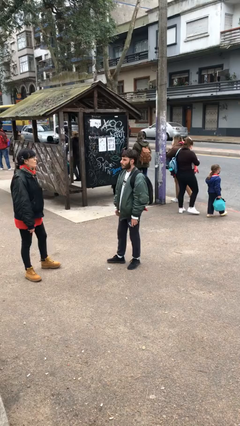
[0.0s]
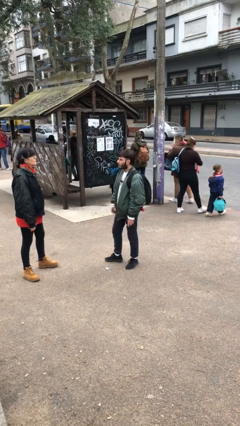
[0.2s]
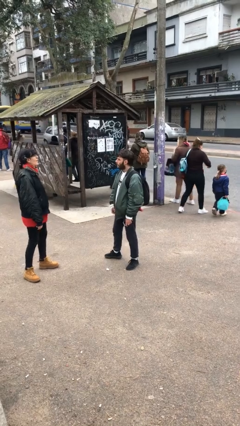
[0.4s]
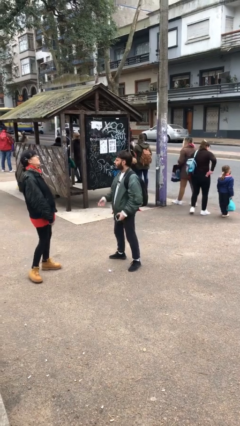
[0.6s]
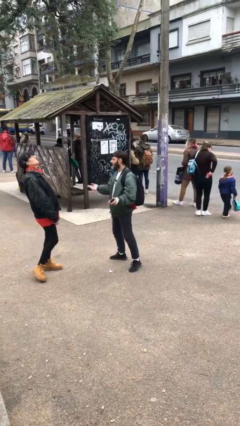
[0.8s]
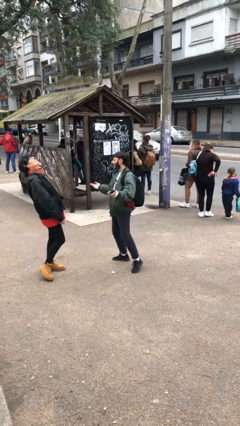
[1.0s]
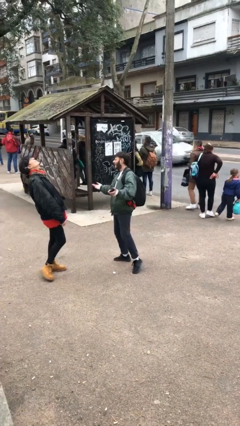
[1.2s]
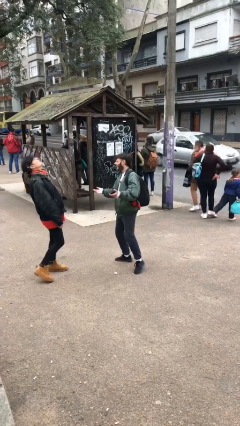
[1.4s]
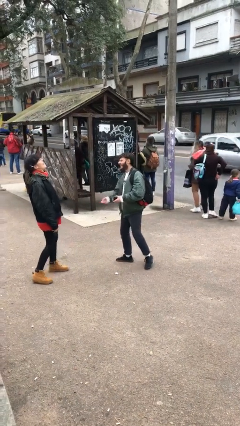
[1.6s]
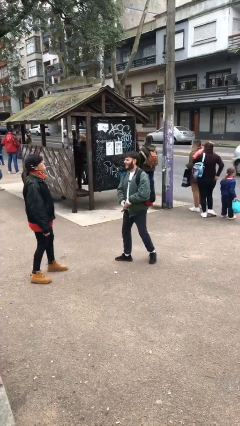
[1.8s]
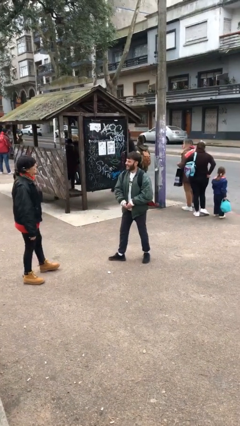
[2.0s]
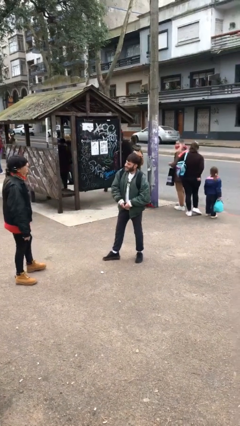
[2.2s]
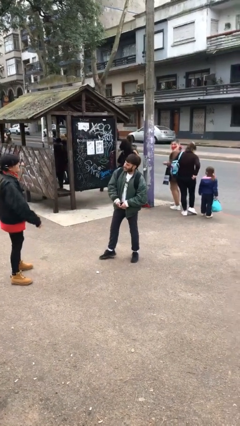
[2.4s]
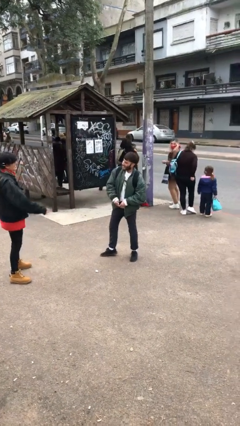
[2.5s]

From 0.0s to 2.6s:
person laughs with person

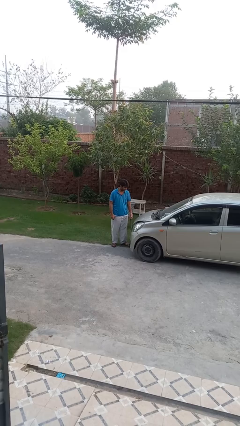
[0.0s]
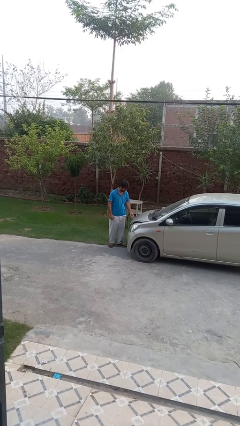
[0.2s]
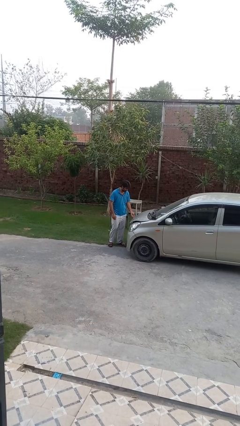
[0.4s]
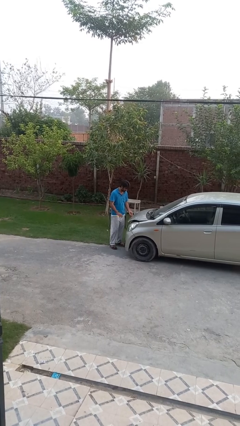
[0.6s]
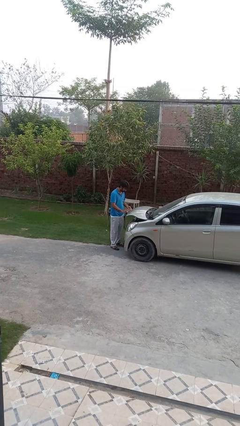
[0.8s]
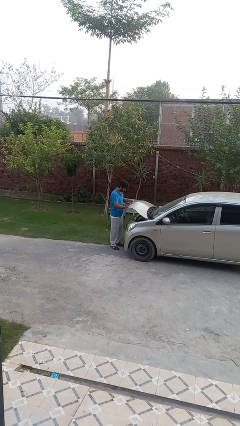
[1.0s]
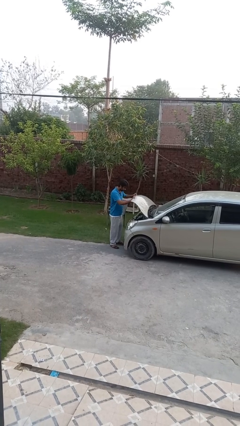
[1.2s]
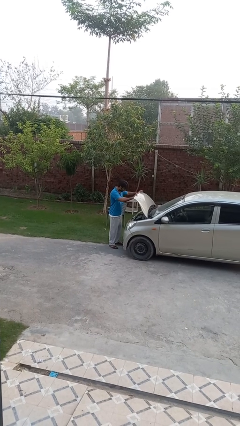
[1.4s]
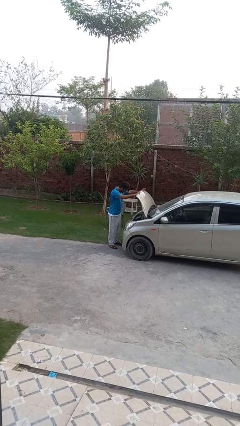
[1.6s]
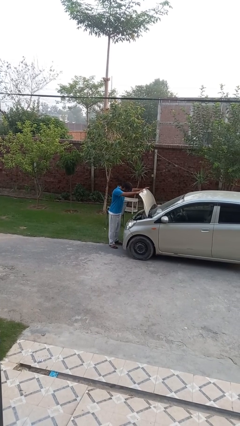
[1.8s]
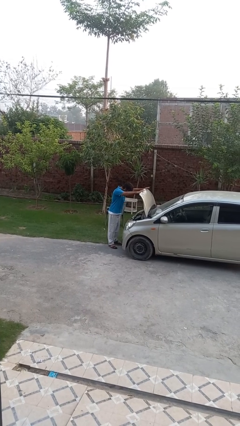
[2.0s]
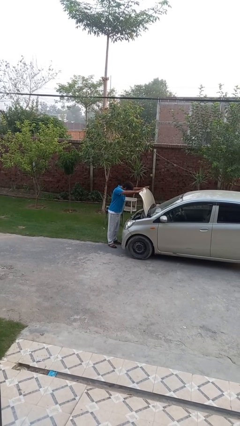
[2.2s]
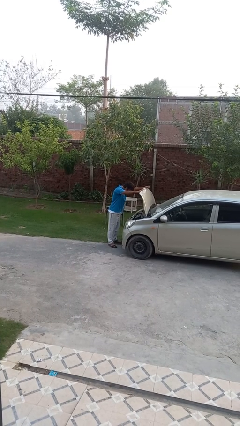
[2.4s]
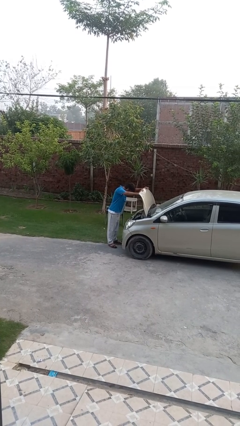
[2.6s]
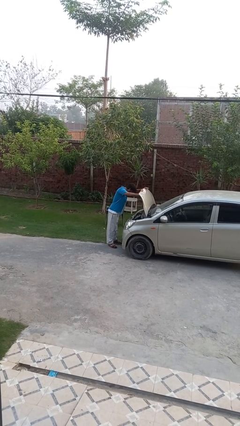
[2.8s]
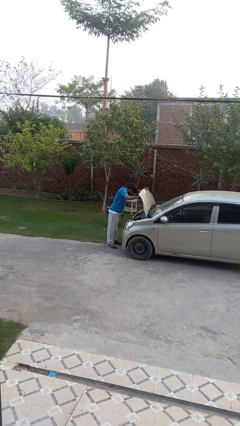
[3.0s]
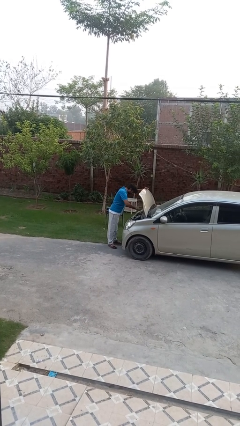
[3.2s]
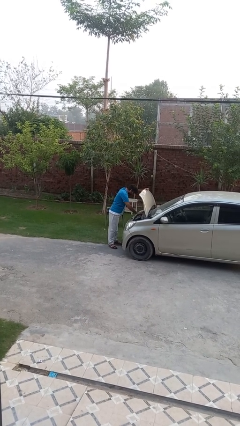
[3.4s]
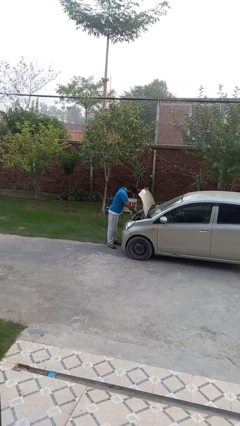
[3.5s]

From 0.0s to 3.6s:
person opens car hood

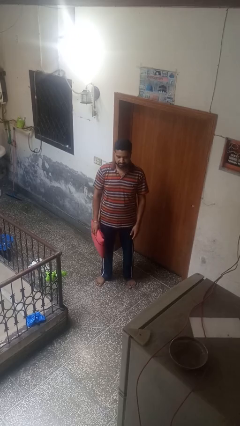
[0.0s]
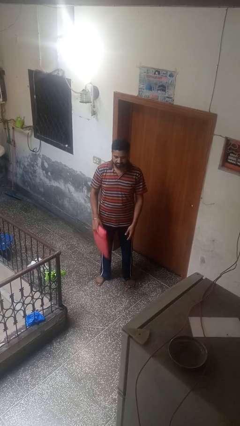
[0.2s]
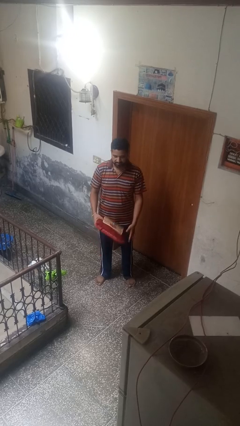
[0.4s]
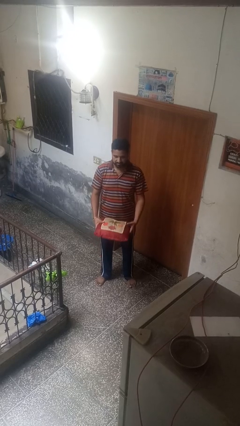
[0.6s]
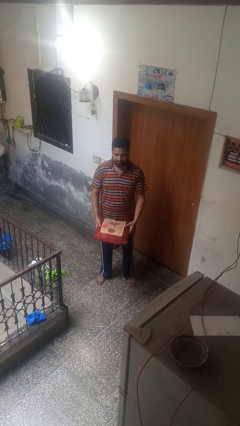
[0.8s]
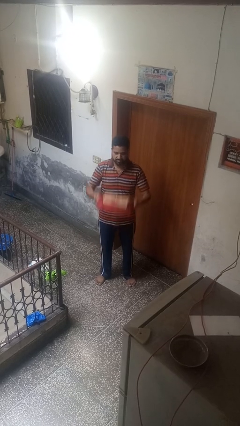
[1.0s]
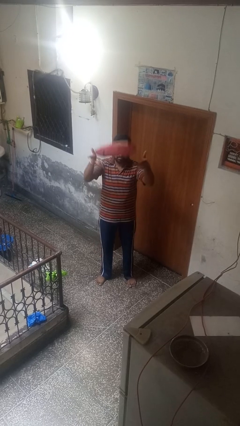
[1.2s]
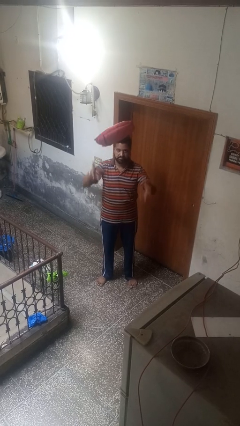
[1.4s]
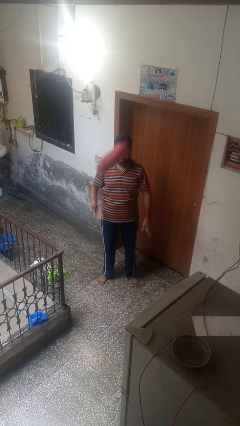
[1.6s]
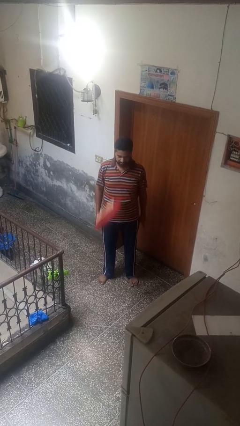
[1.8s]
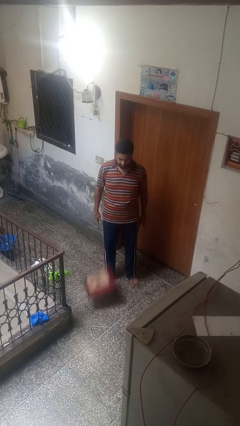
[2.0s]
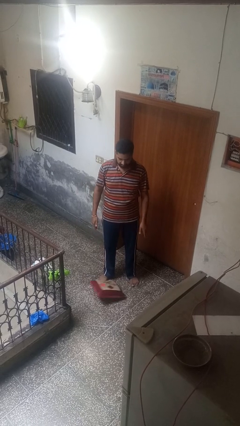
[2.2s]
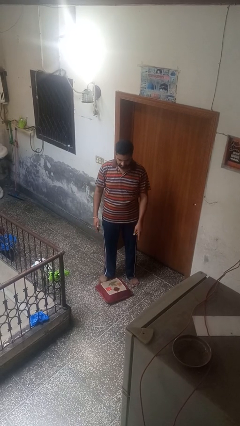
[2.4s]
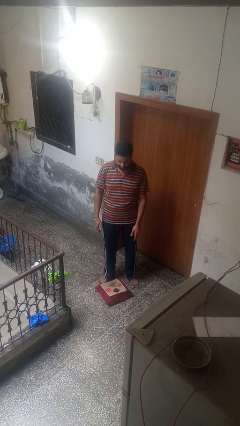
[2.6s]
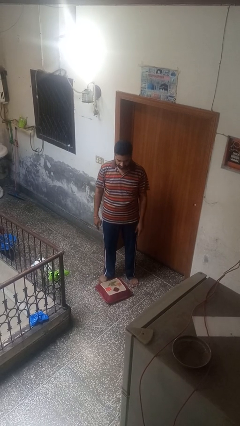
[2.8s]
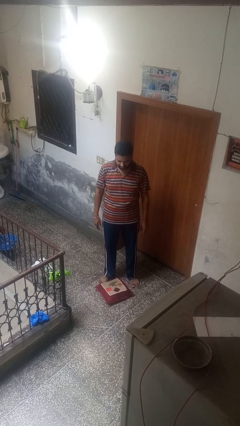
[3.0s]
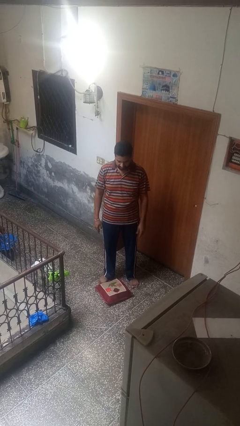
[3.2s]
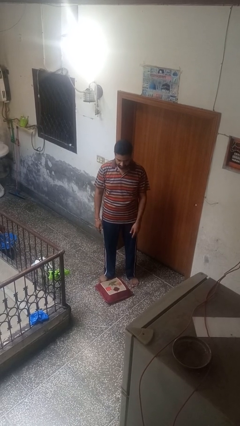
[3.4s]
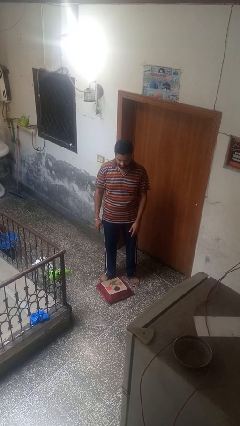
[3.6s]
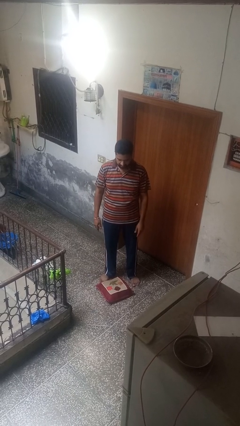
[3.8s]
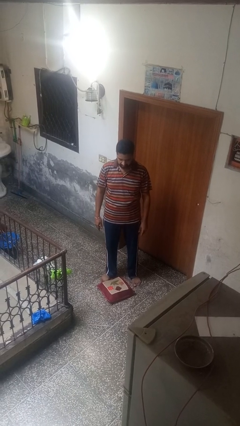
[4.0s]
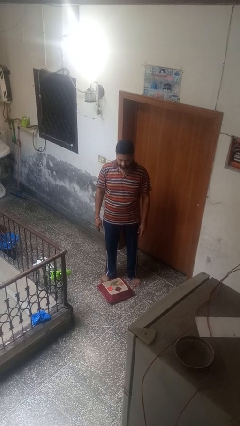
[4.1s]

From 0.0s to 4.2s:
person throws object into air

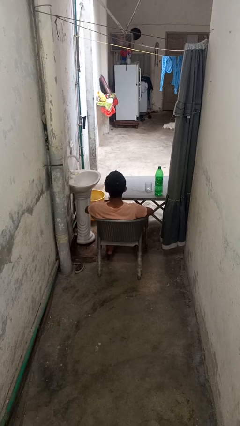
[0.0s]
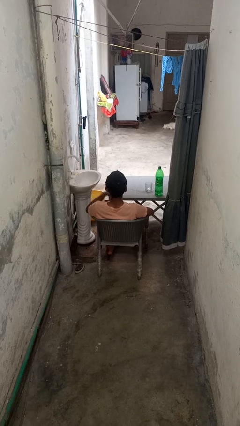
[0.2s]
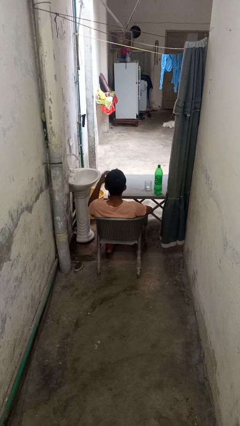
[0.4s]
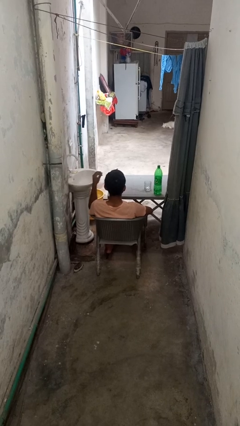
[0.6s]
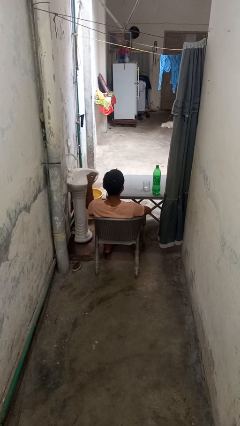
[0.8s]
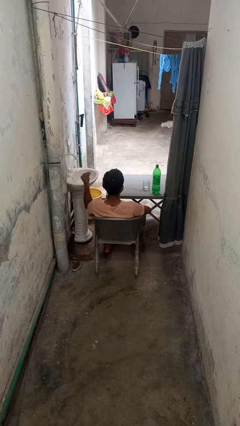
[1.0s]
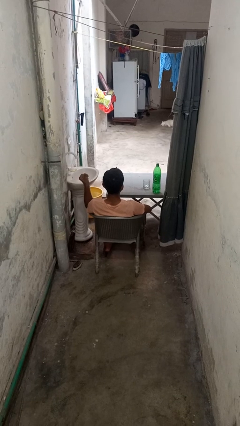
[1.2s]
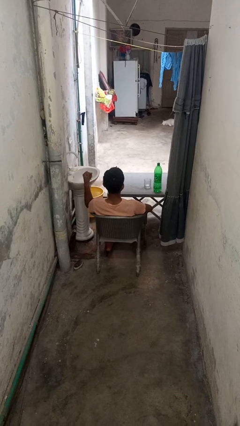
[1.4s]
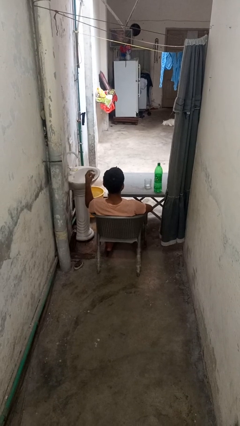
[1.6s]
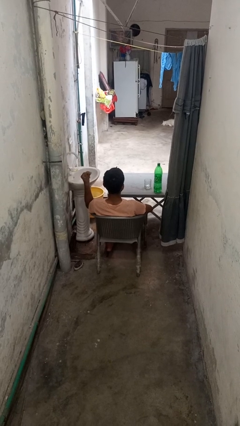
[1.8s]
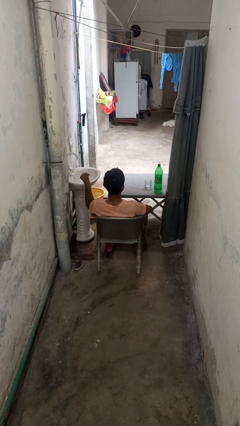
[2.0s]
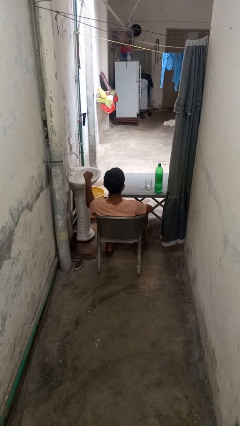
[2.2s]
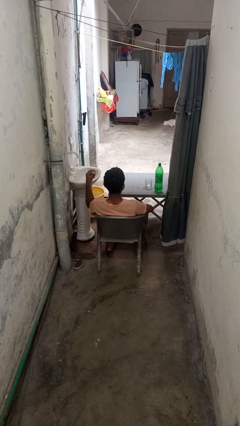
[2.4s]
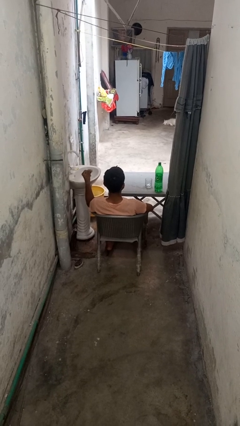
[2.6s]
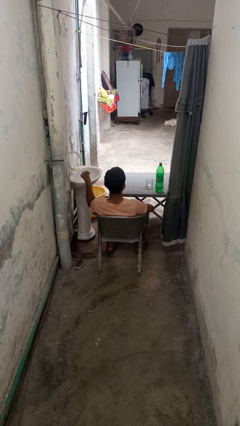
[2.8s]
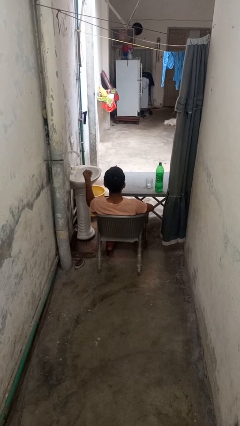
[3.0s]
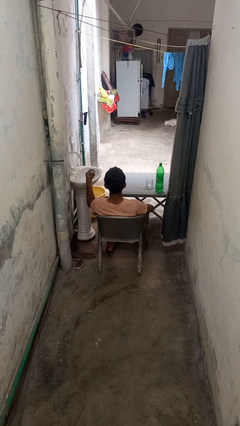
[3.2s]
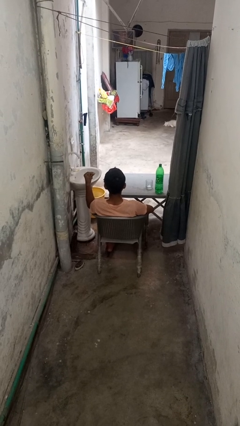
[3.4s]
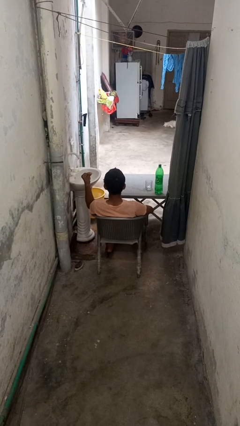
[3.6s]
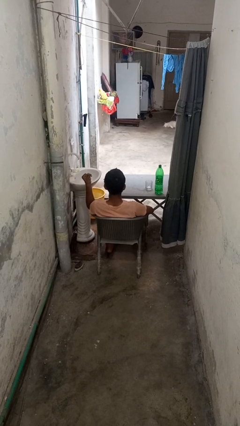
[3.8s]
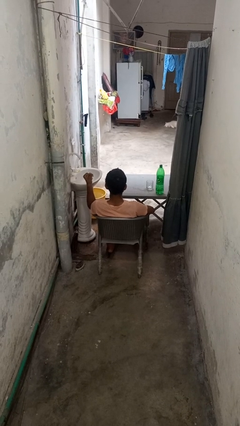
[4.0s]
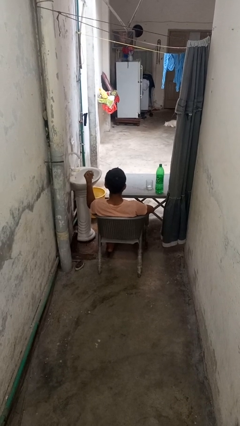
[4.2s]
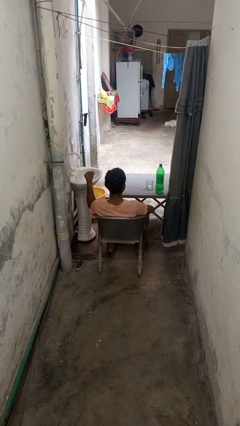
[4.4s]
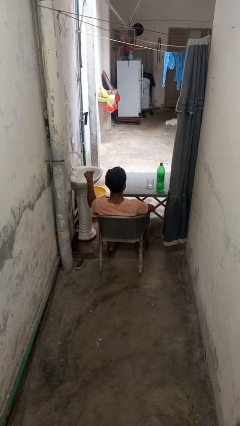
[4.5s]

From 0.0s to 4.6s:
person snaps fingers

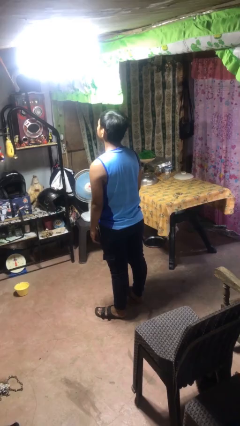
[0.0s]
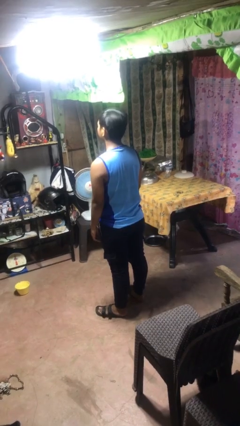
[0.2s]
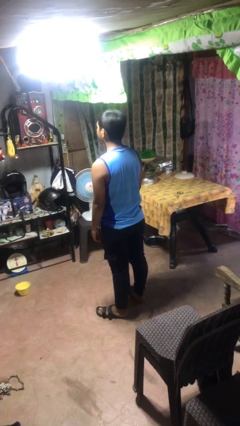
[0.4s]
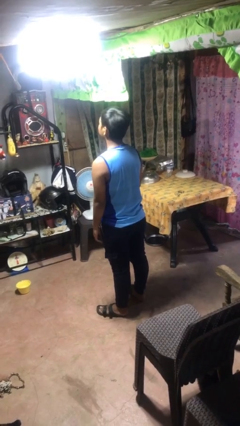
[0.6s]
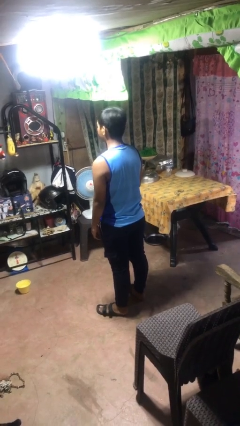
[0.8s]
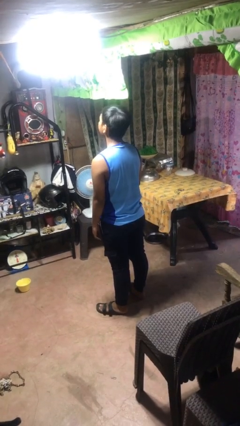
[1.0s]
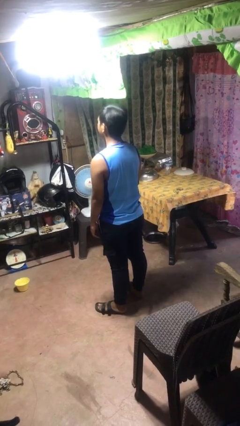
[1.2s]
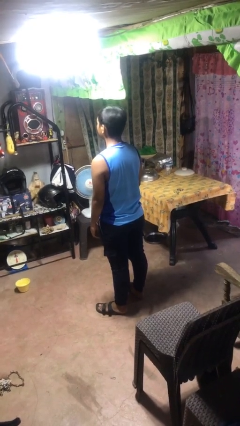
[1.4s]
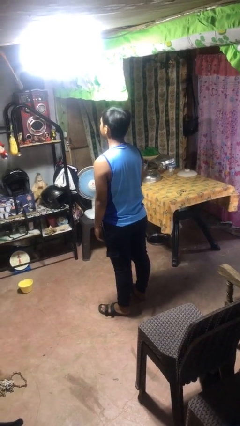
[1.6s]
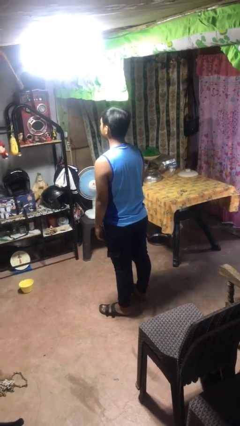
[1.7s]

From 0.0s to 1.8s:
person nods head

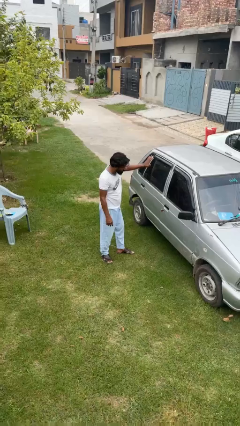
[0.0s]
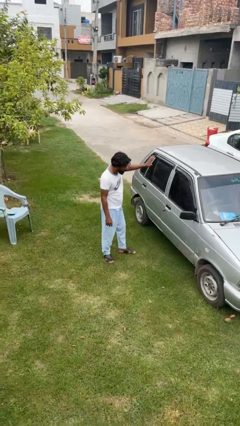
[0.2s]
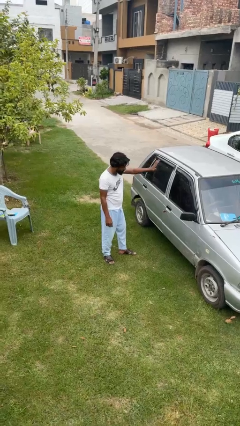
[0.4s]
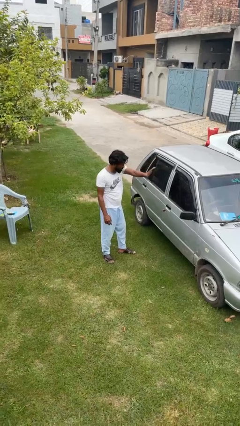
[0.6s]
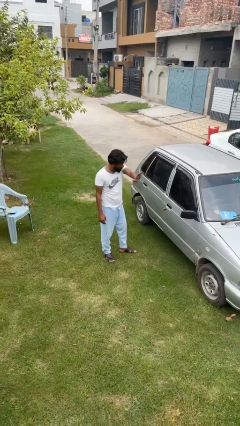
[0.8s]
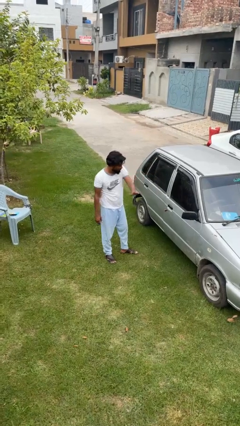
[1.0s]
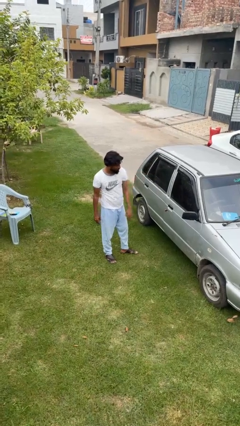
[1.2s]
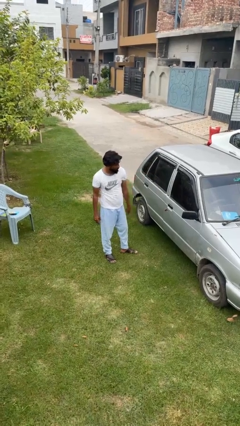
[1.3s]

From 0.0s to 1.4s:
person gestures swipe right
